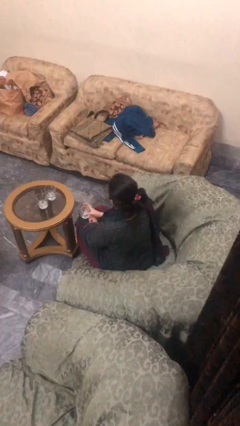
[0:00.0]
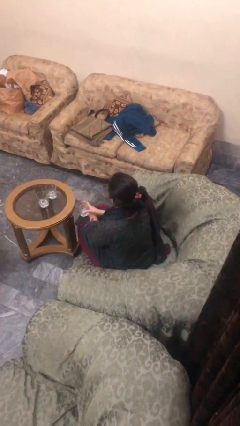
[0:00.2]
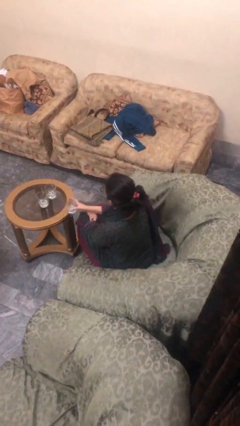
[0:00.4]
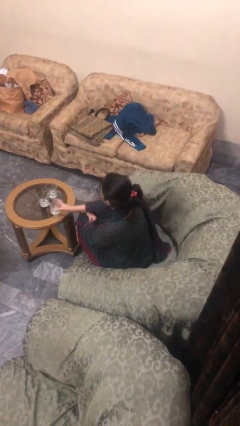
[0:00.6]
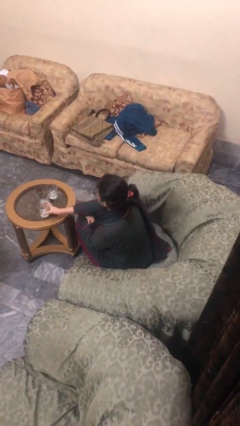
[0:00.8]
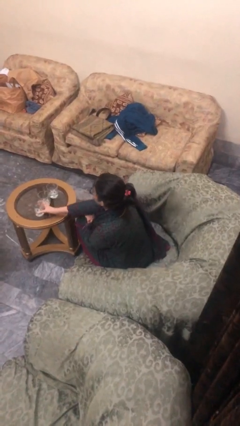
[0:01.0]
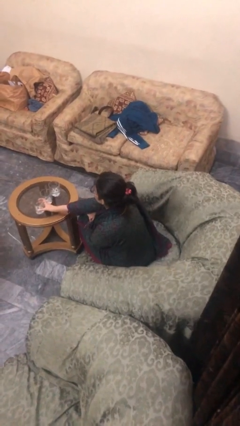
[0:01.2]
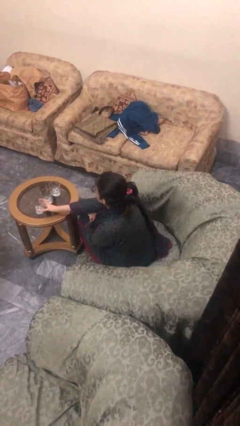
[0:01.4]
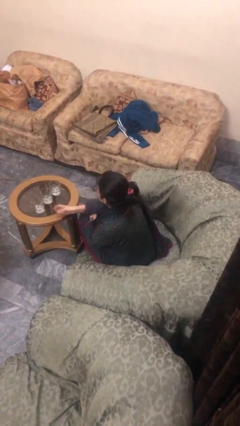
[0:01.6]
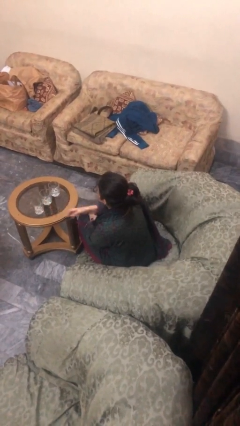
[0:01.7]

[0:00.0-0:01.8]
person puts down object on table

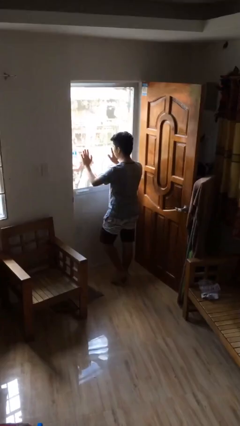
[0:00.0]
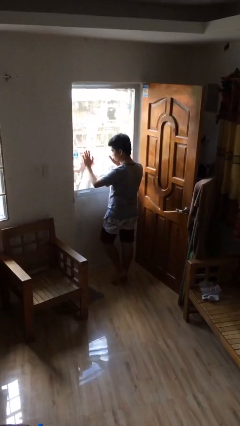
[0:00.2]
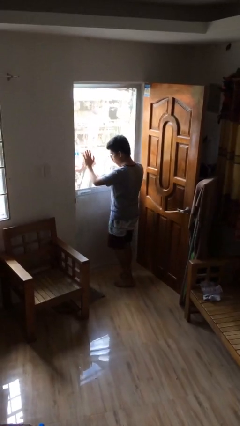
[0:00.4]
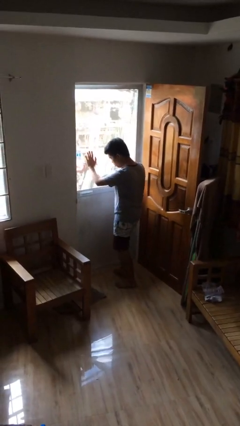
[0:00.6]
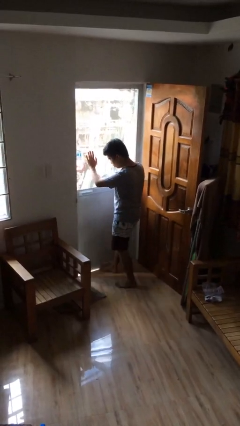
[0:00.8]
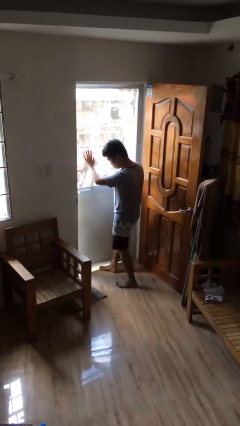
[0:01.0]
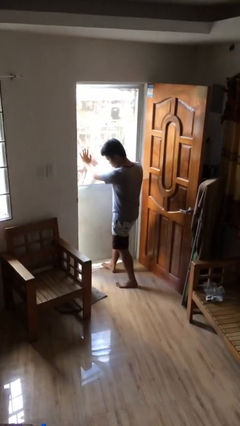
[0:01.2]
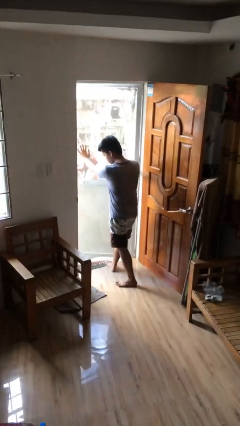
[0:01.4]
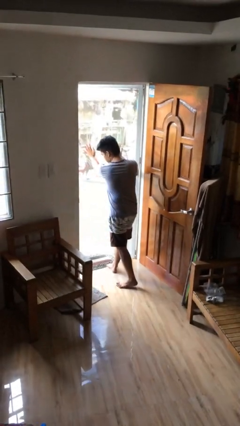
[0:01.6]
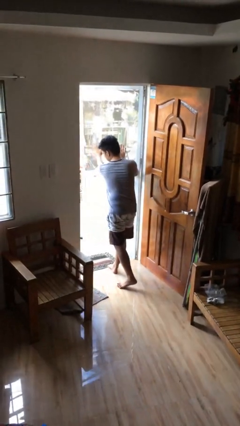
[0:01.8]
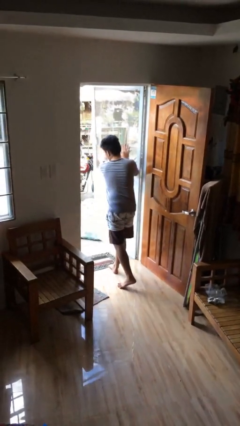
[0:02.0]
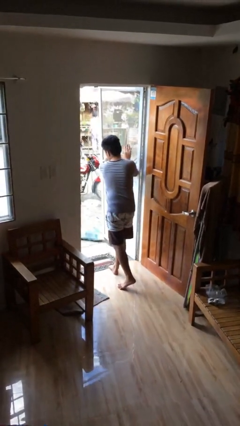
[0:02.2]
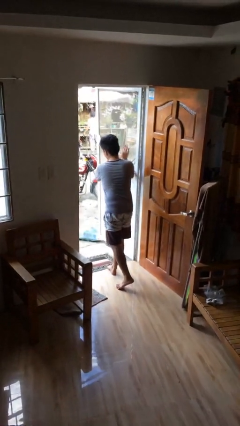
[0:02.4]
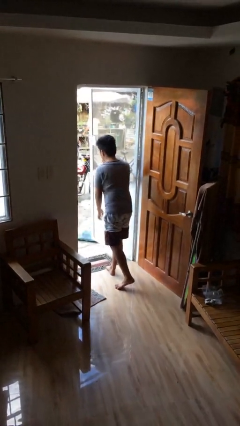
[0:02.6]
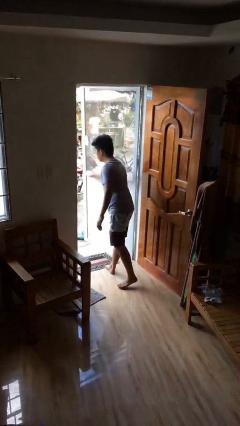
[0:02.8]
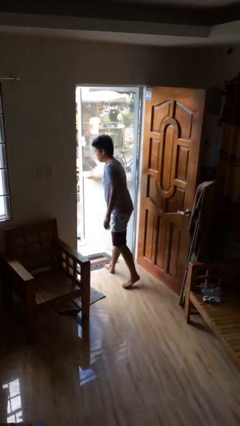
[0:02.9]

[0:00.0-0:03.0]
person opens facility door

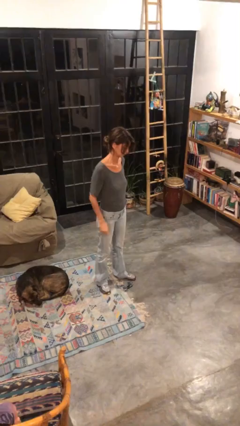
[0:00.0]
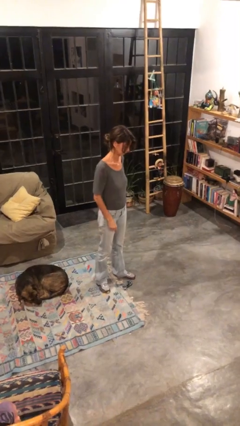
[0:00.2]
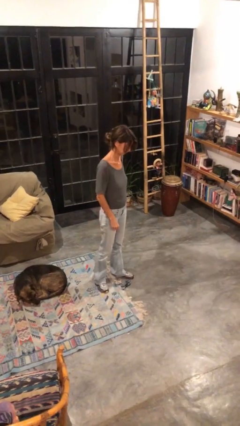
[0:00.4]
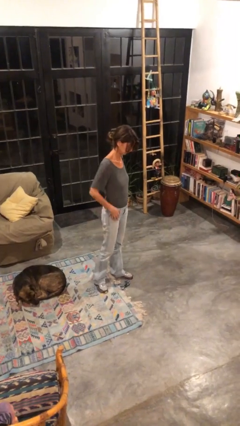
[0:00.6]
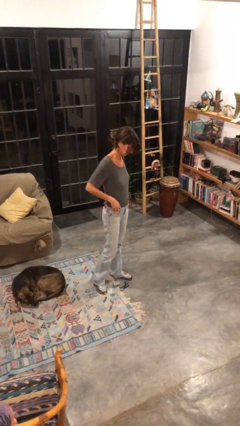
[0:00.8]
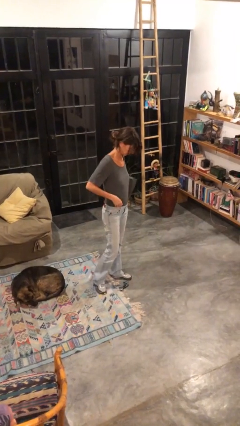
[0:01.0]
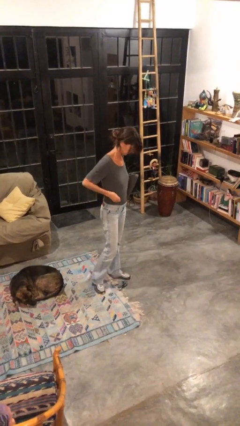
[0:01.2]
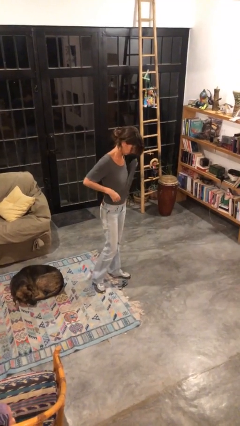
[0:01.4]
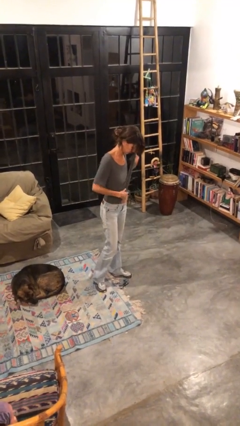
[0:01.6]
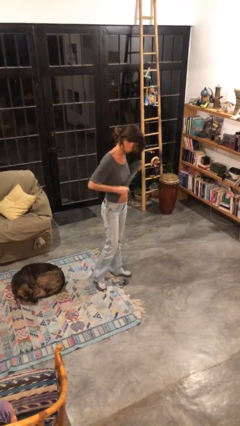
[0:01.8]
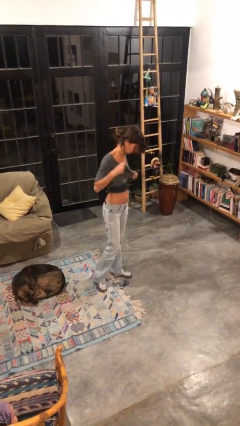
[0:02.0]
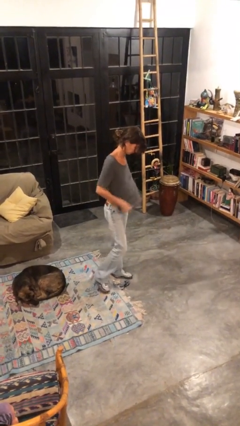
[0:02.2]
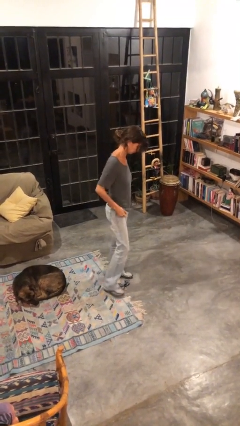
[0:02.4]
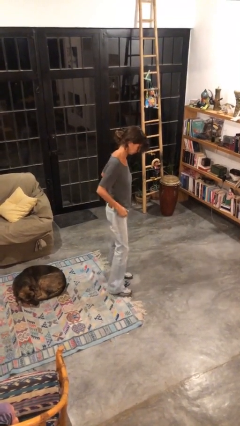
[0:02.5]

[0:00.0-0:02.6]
person untucks shirt

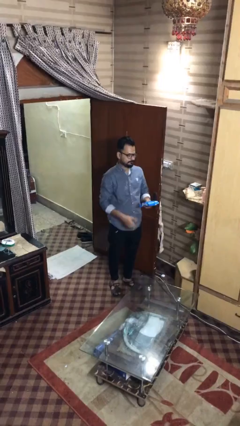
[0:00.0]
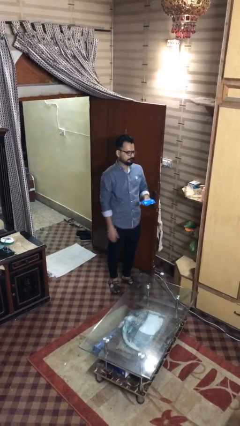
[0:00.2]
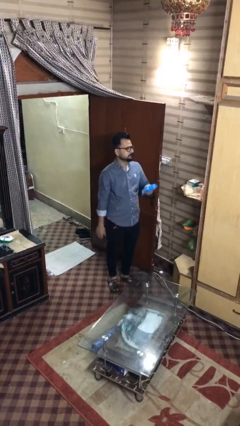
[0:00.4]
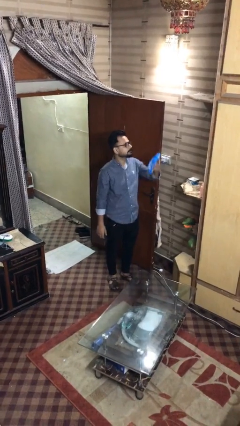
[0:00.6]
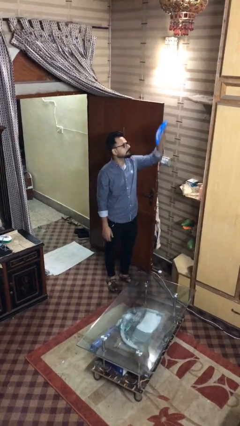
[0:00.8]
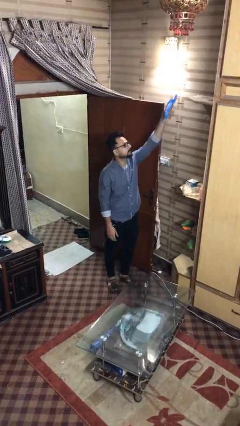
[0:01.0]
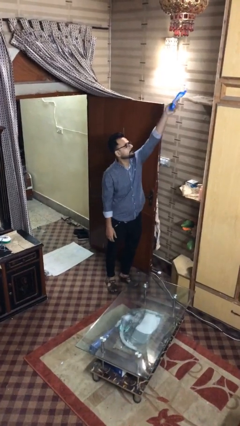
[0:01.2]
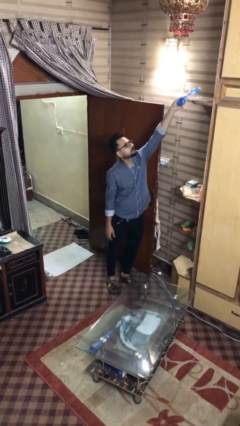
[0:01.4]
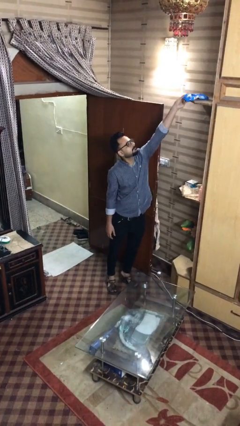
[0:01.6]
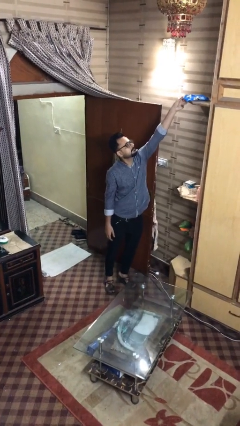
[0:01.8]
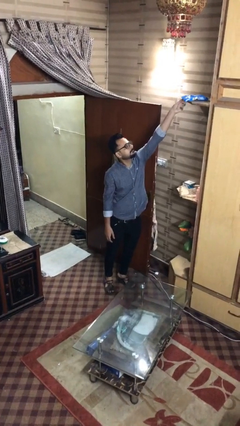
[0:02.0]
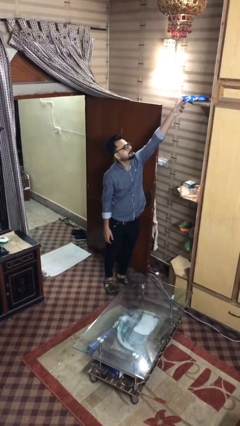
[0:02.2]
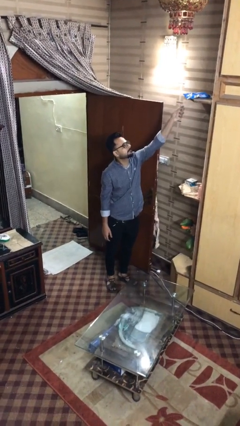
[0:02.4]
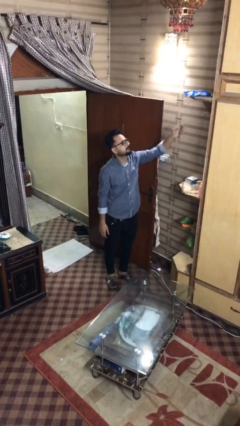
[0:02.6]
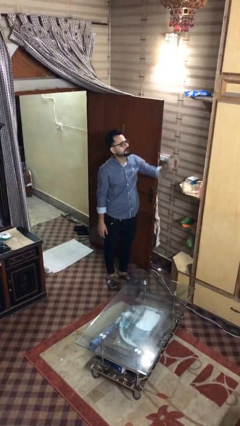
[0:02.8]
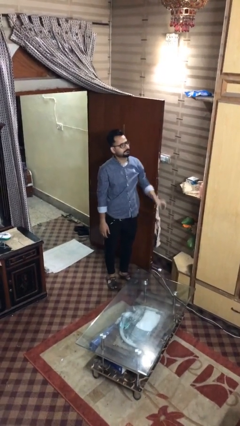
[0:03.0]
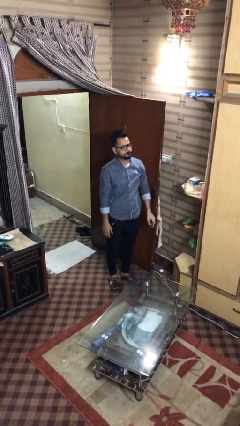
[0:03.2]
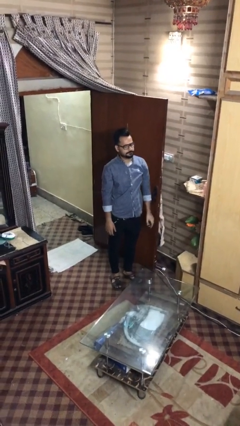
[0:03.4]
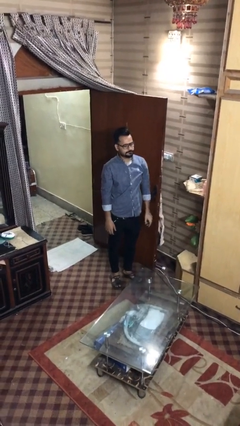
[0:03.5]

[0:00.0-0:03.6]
person puts down object on shelf

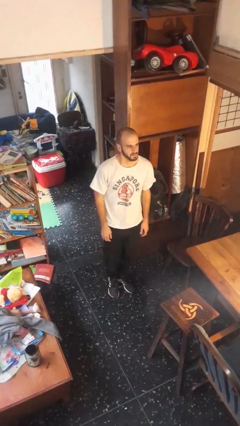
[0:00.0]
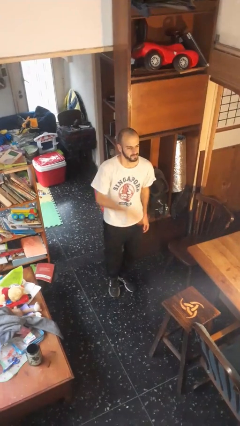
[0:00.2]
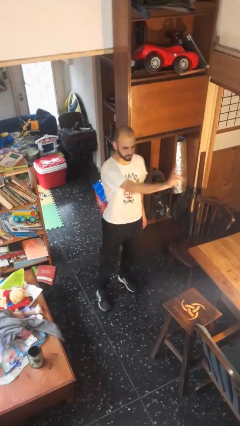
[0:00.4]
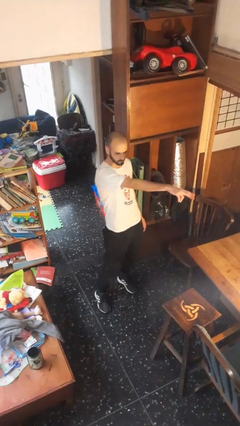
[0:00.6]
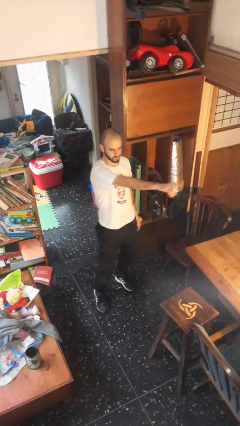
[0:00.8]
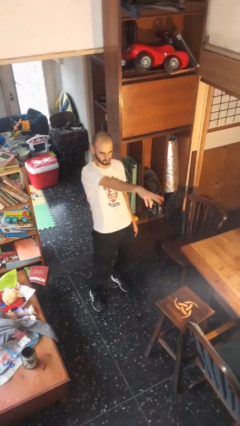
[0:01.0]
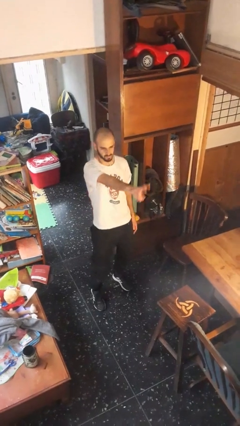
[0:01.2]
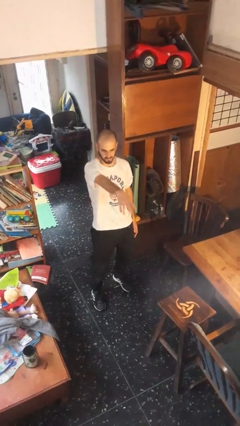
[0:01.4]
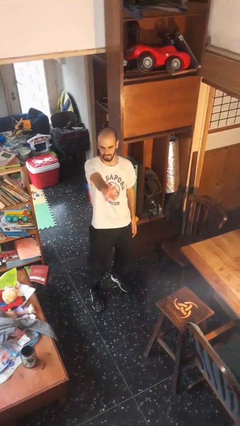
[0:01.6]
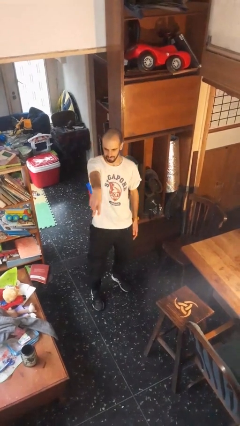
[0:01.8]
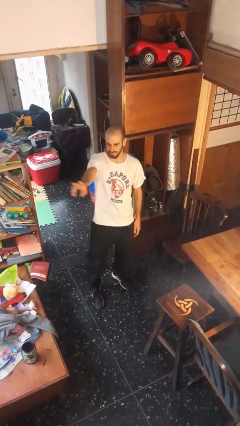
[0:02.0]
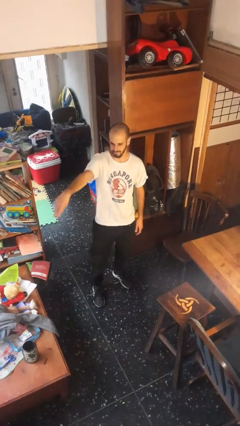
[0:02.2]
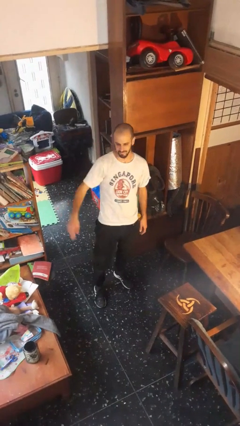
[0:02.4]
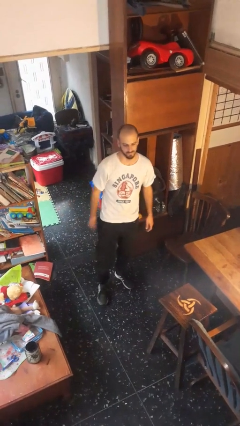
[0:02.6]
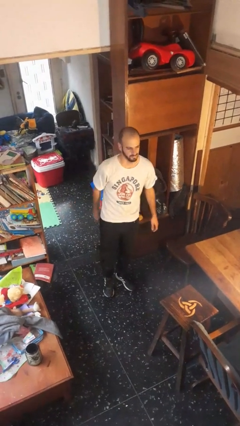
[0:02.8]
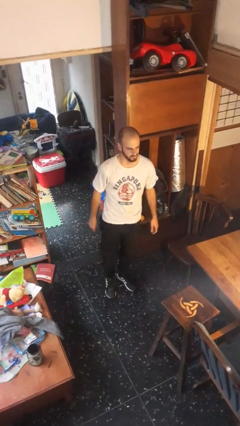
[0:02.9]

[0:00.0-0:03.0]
person dances in place

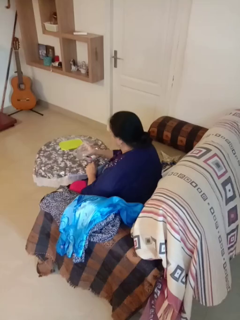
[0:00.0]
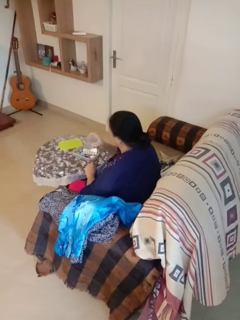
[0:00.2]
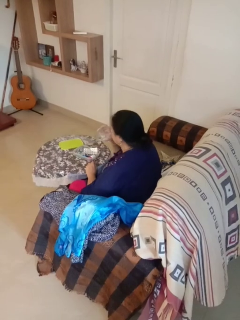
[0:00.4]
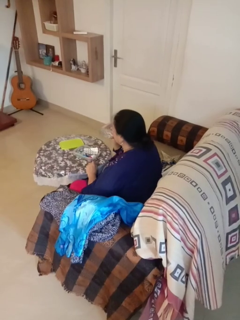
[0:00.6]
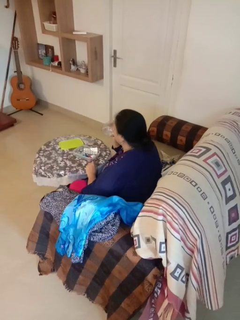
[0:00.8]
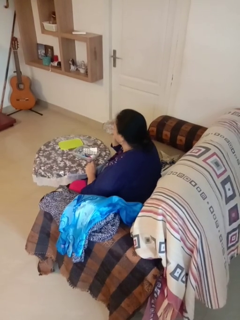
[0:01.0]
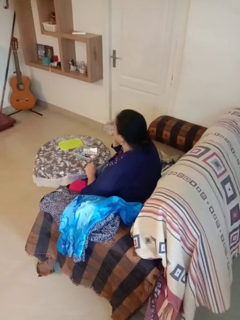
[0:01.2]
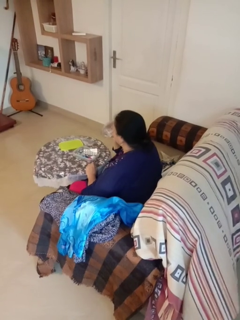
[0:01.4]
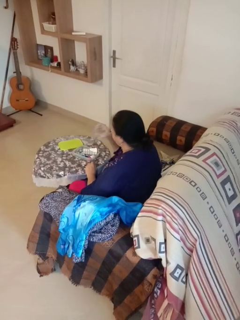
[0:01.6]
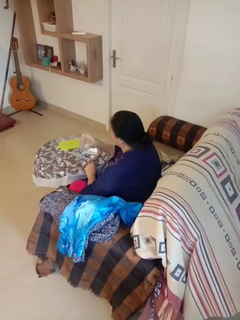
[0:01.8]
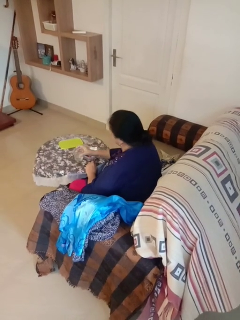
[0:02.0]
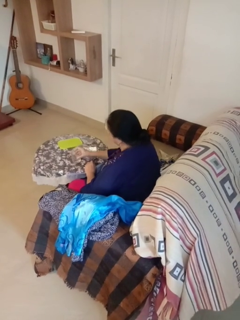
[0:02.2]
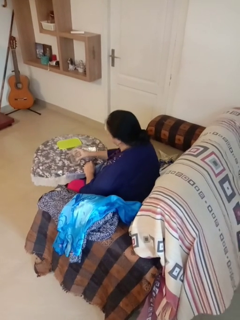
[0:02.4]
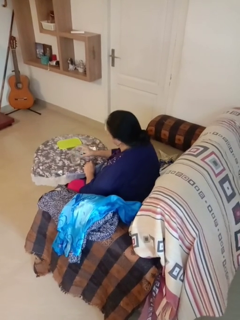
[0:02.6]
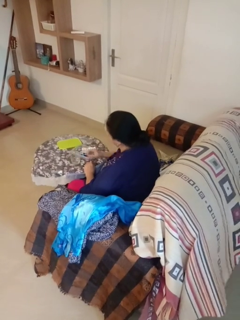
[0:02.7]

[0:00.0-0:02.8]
person drinks from cup

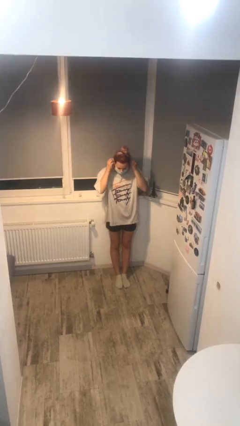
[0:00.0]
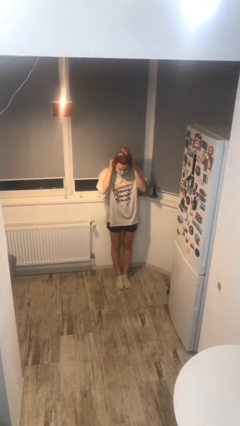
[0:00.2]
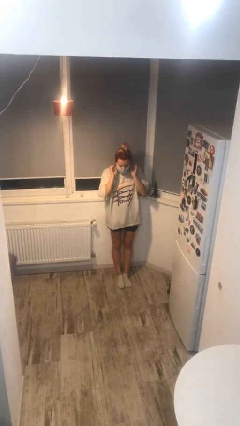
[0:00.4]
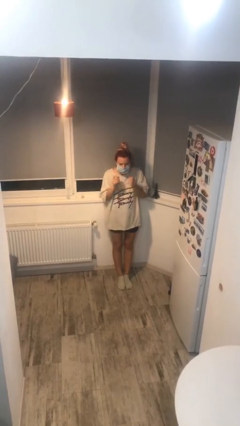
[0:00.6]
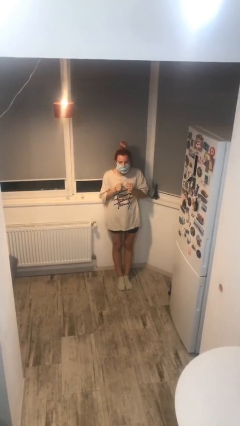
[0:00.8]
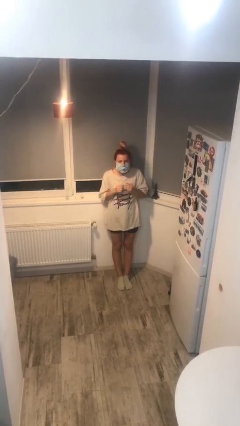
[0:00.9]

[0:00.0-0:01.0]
person puts on facemask

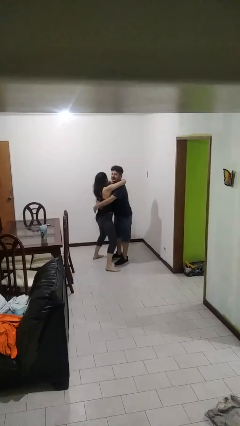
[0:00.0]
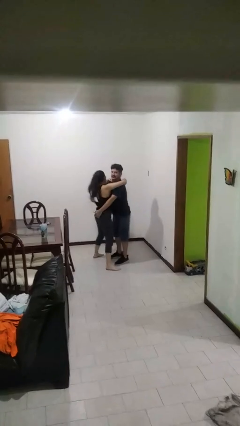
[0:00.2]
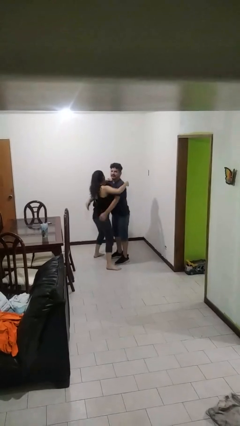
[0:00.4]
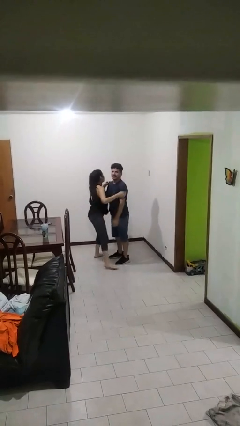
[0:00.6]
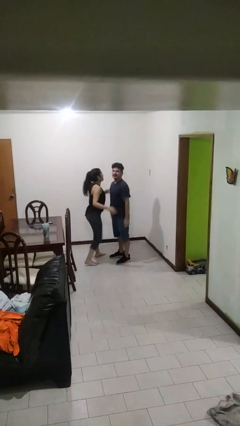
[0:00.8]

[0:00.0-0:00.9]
person puts down person
